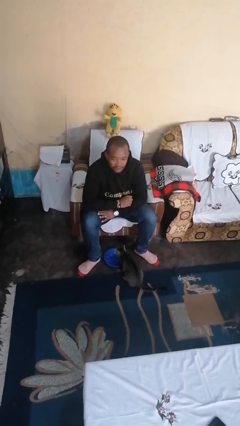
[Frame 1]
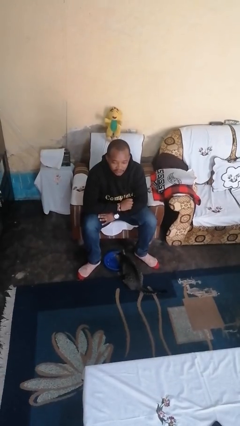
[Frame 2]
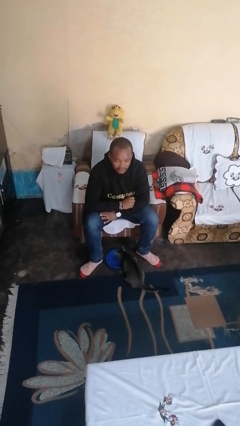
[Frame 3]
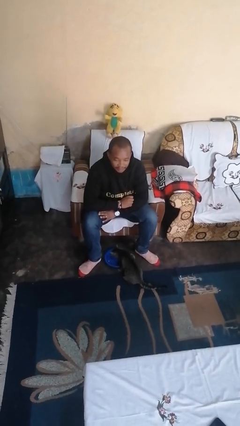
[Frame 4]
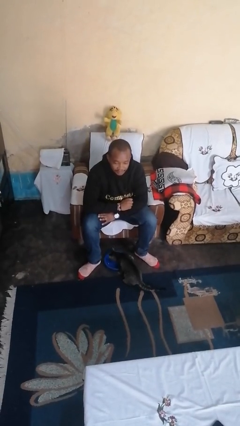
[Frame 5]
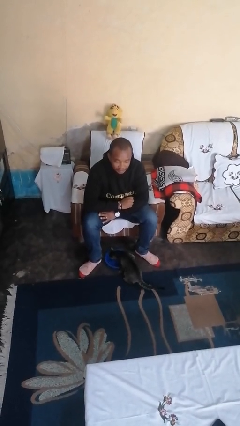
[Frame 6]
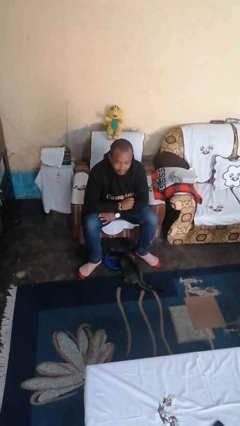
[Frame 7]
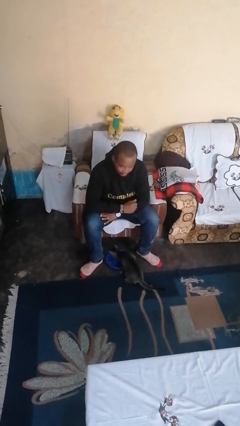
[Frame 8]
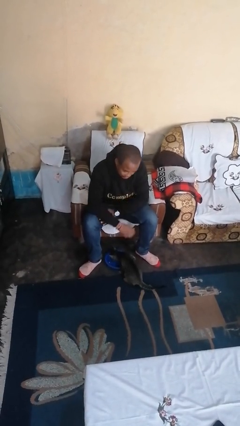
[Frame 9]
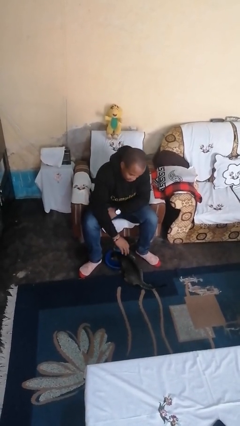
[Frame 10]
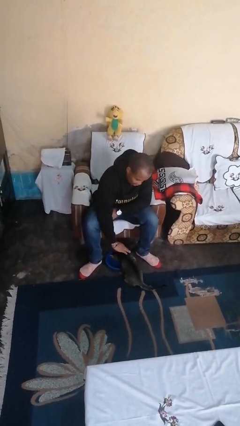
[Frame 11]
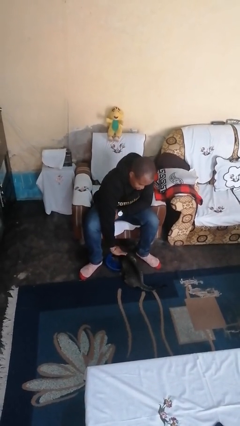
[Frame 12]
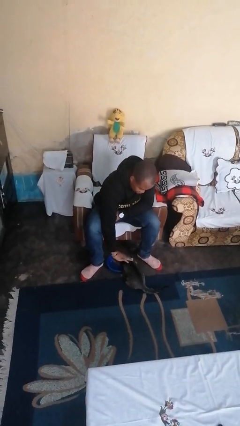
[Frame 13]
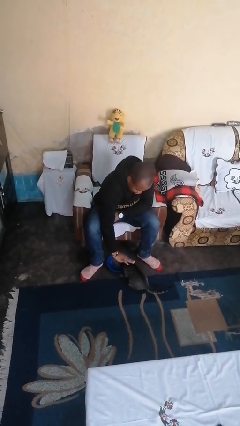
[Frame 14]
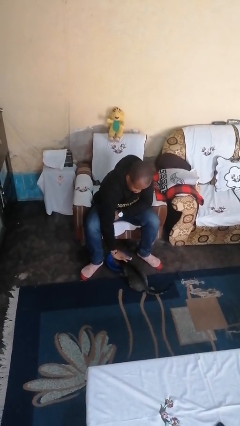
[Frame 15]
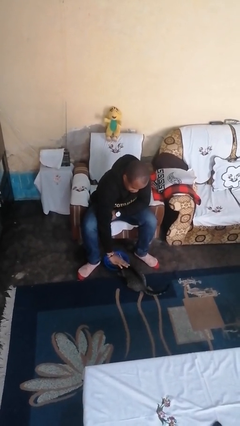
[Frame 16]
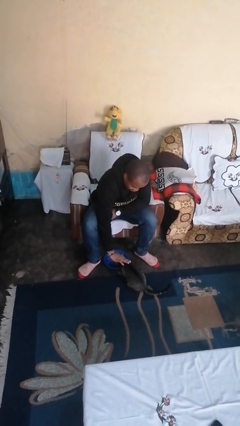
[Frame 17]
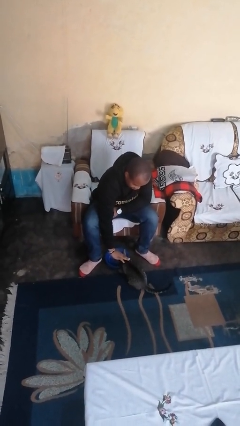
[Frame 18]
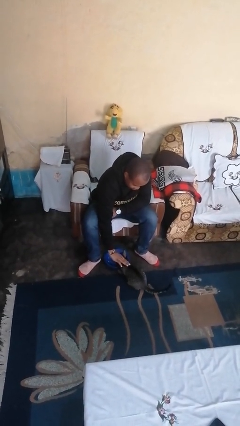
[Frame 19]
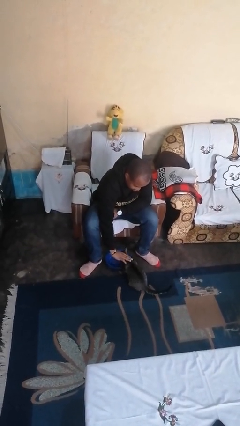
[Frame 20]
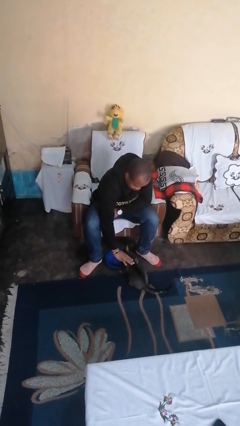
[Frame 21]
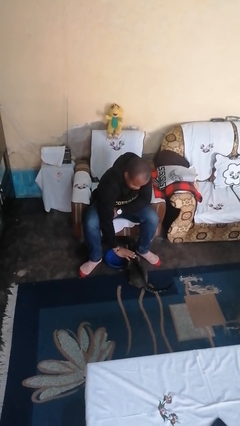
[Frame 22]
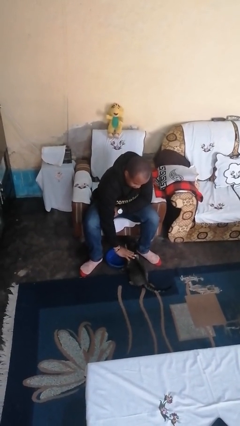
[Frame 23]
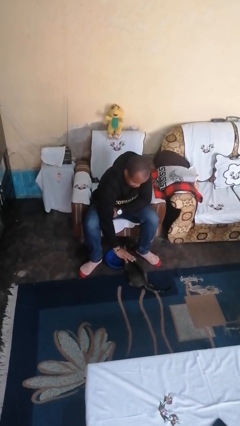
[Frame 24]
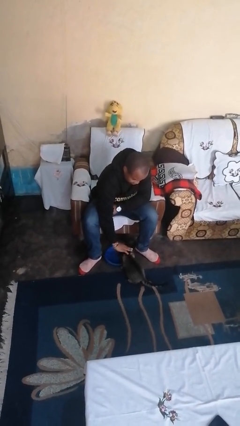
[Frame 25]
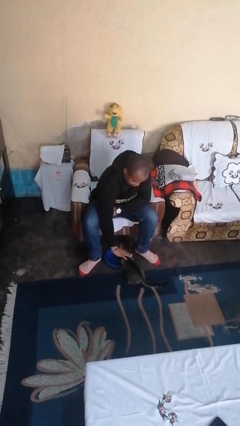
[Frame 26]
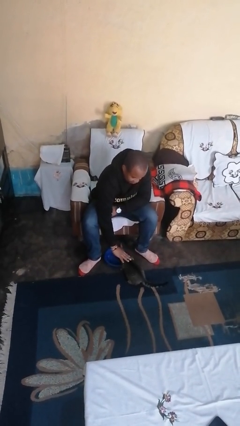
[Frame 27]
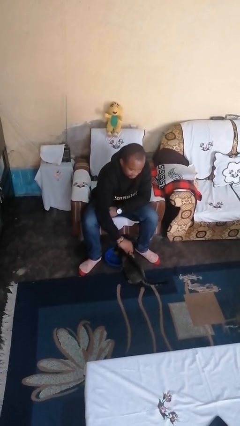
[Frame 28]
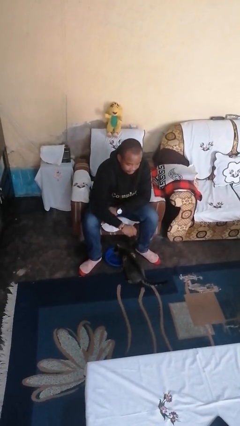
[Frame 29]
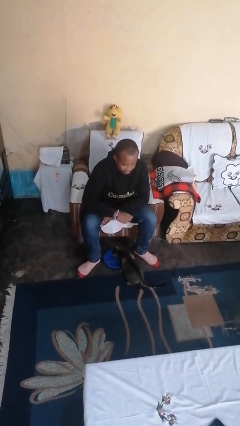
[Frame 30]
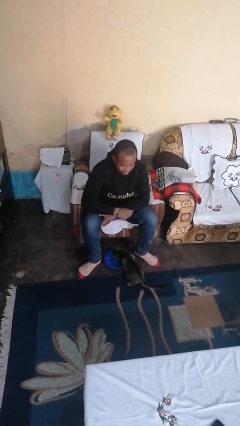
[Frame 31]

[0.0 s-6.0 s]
person hugs cat

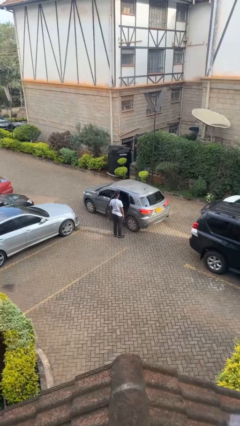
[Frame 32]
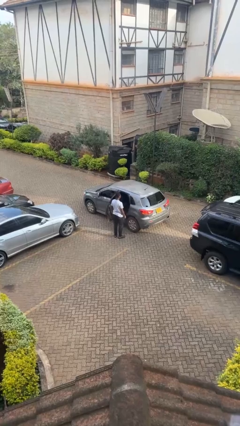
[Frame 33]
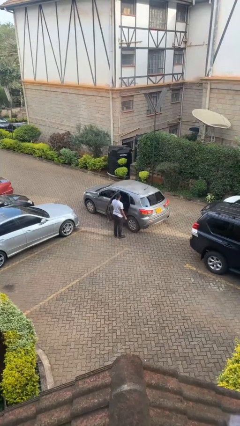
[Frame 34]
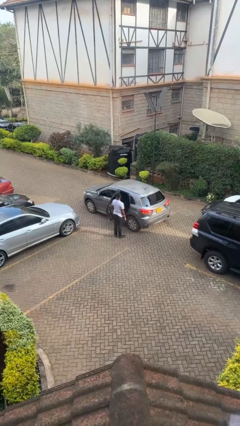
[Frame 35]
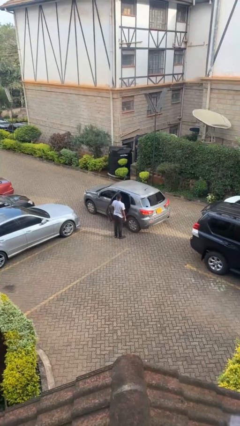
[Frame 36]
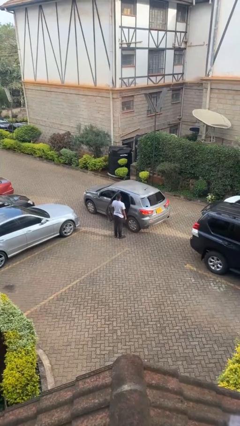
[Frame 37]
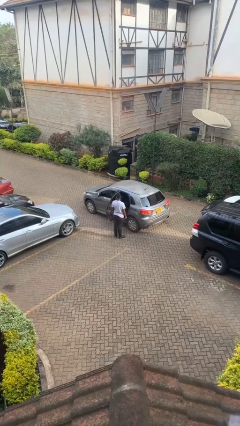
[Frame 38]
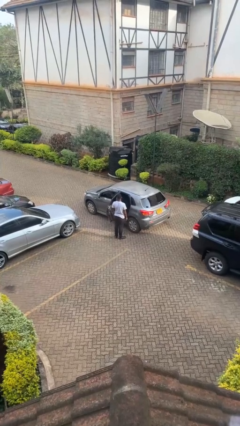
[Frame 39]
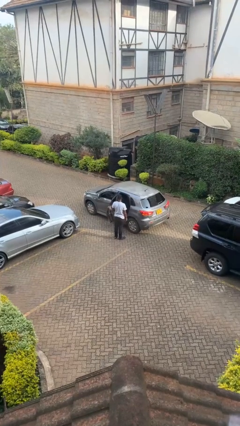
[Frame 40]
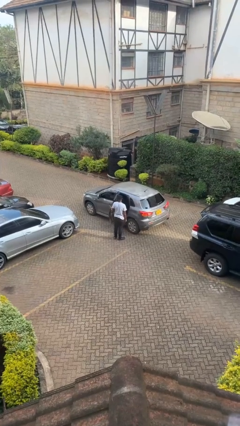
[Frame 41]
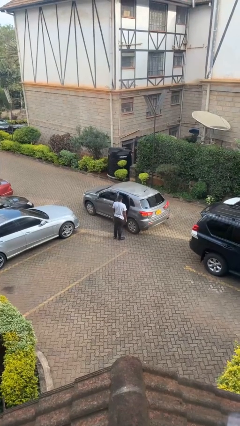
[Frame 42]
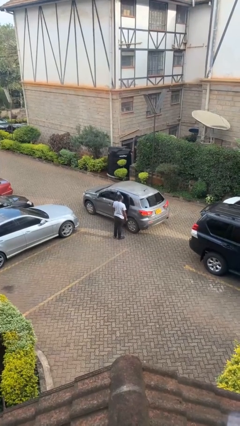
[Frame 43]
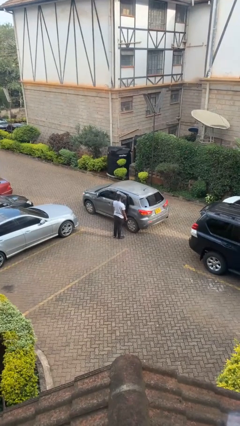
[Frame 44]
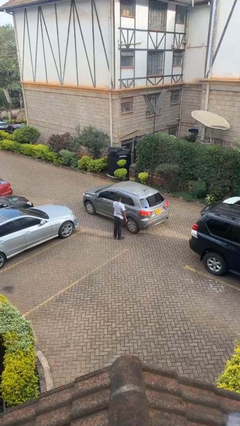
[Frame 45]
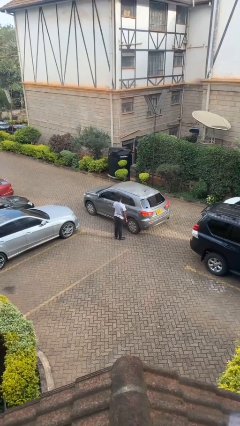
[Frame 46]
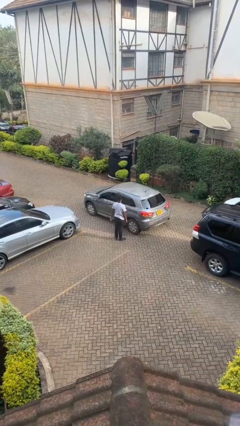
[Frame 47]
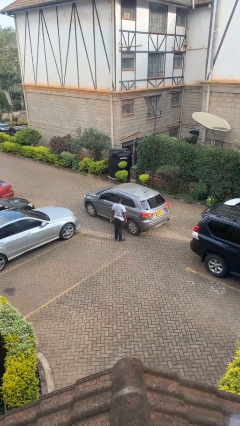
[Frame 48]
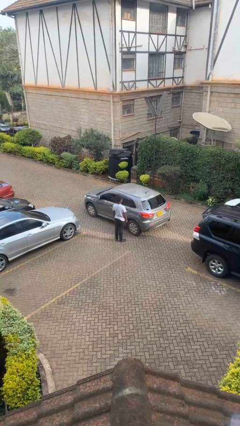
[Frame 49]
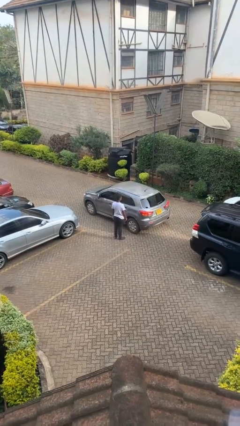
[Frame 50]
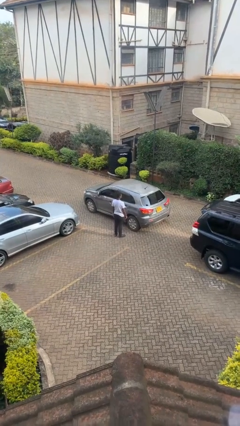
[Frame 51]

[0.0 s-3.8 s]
person closes car door

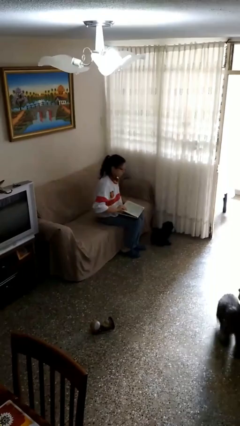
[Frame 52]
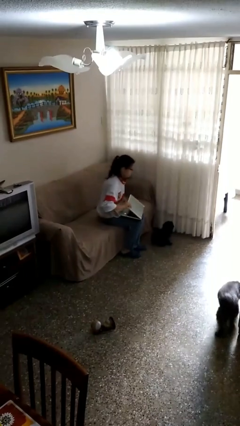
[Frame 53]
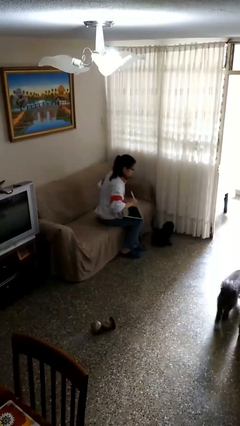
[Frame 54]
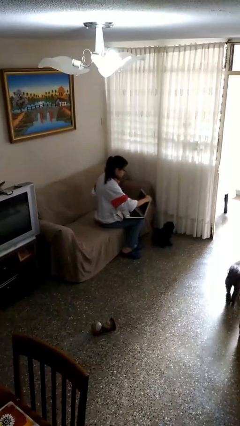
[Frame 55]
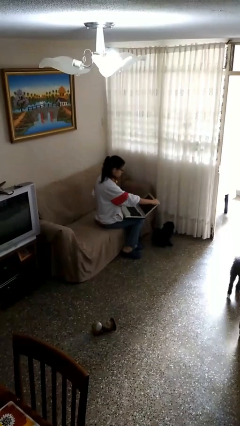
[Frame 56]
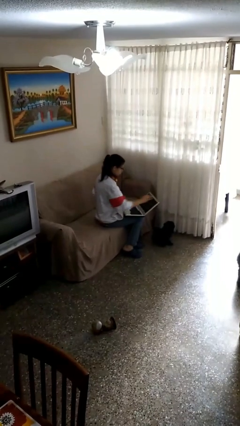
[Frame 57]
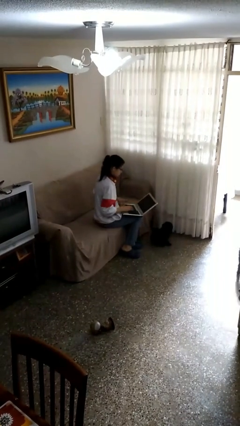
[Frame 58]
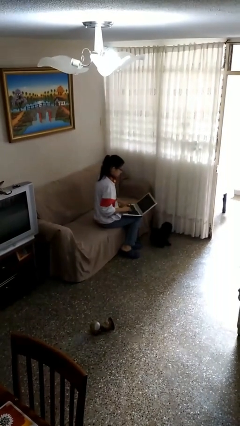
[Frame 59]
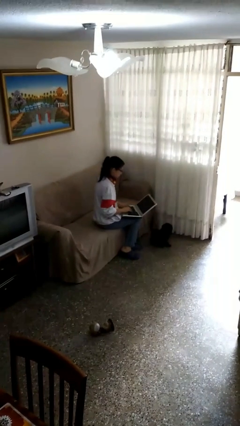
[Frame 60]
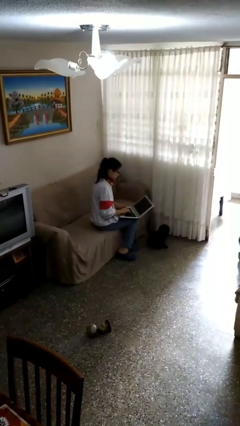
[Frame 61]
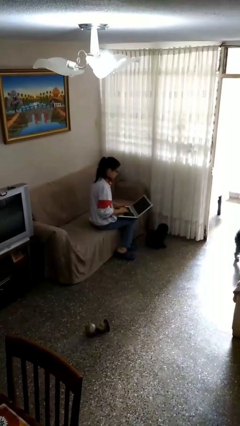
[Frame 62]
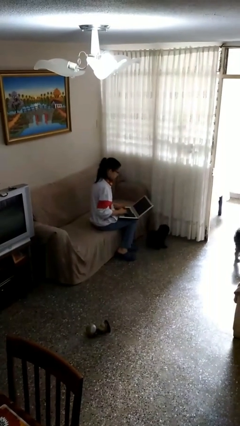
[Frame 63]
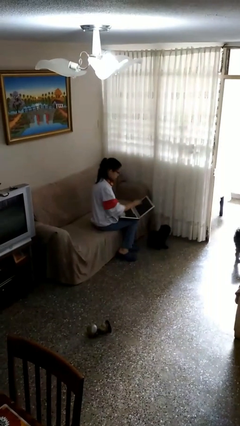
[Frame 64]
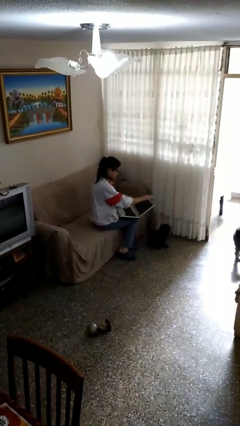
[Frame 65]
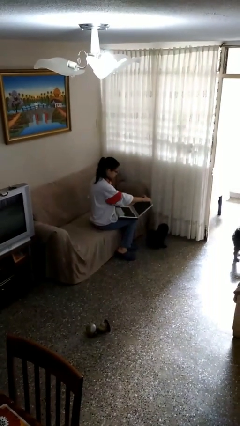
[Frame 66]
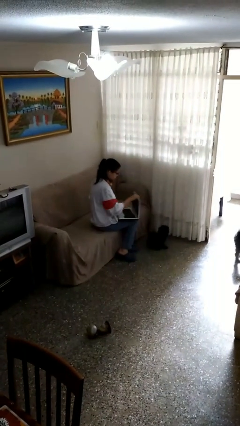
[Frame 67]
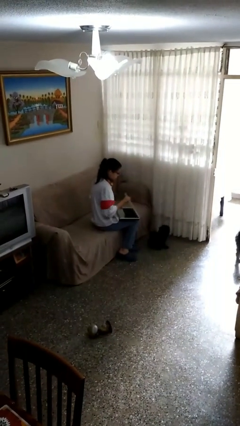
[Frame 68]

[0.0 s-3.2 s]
person interacts with laptop

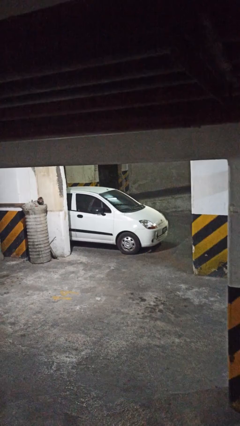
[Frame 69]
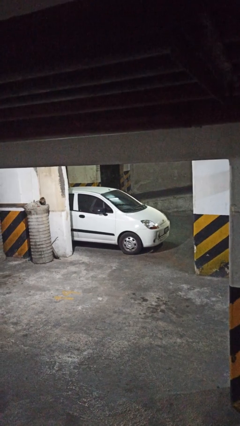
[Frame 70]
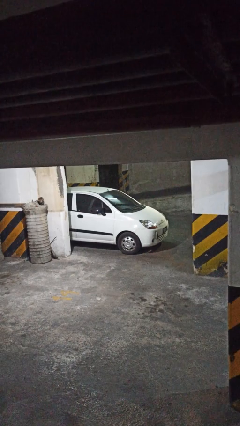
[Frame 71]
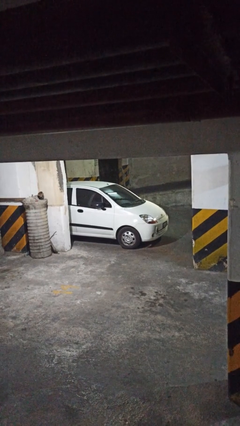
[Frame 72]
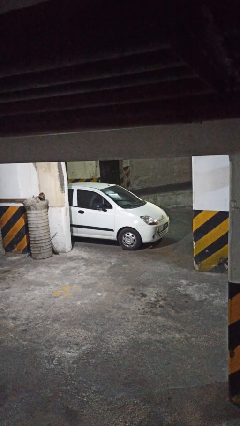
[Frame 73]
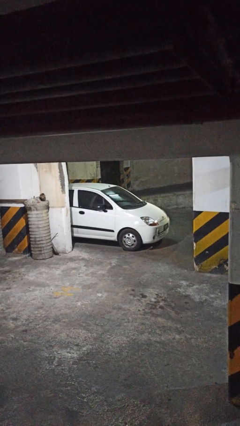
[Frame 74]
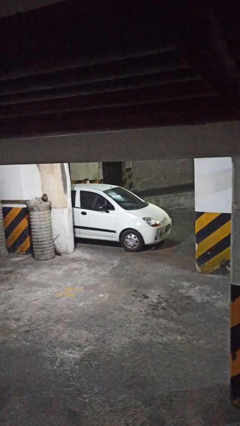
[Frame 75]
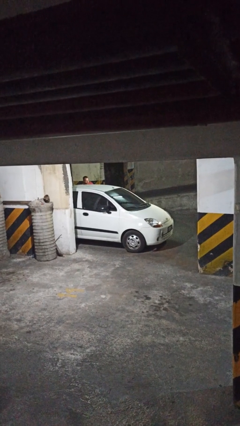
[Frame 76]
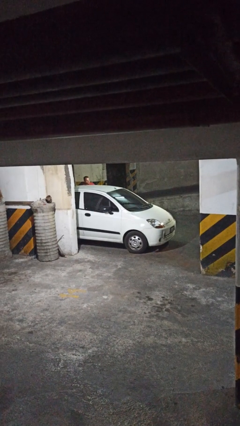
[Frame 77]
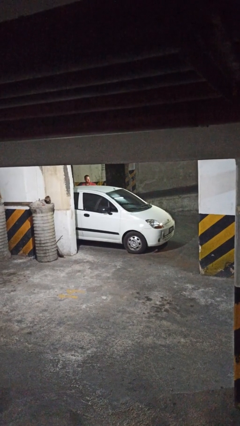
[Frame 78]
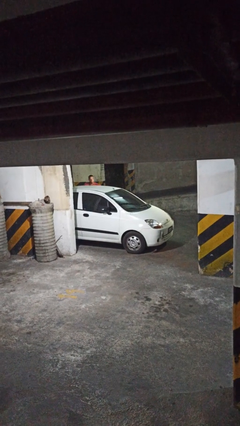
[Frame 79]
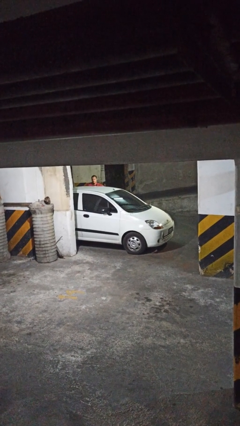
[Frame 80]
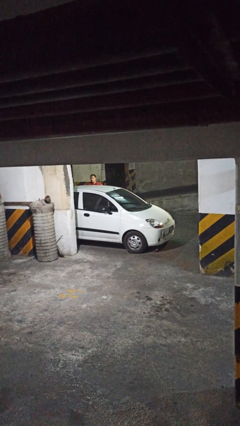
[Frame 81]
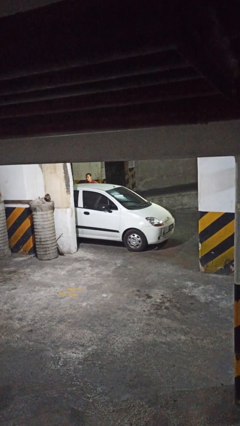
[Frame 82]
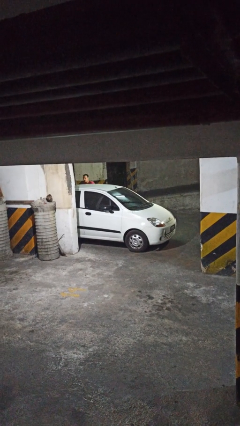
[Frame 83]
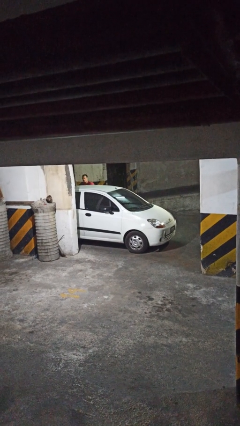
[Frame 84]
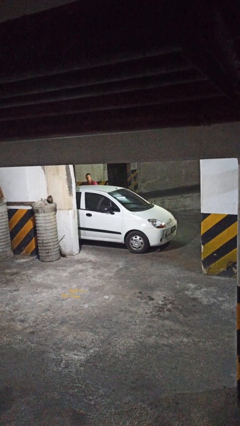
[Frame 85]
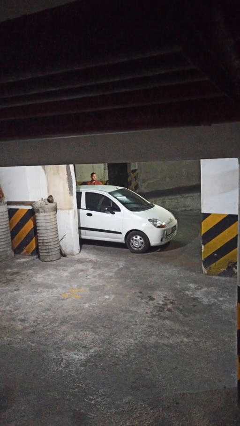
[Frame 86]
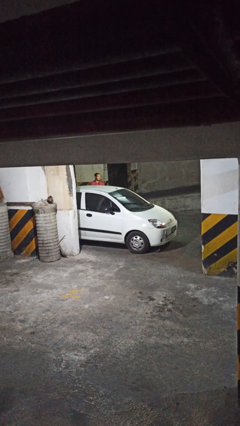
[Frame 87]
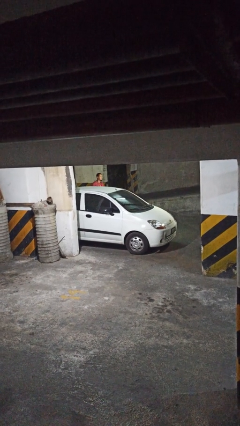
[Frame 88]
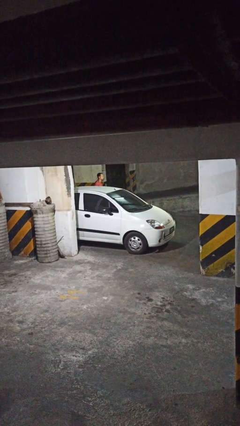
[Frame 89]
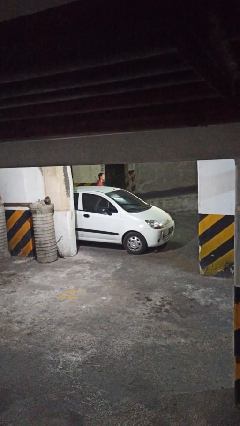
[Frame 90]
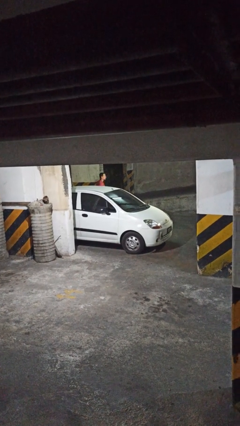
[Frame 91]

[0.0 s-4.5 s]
car drops off person
